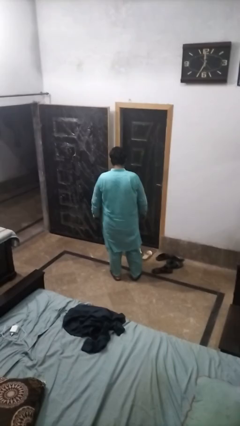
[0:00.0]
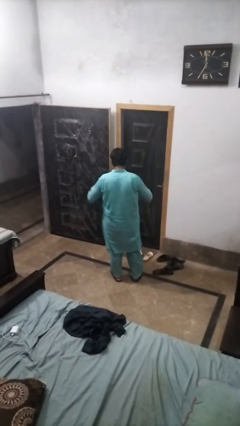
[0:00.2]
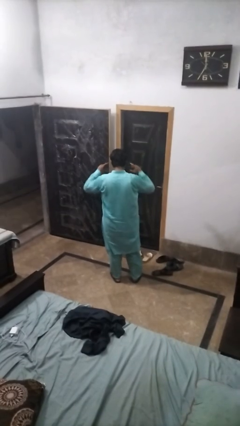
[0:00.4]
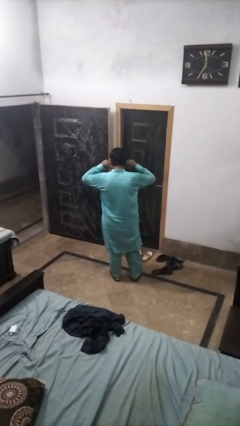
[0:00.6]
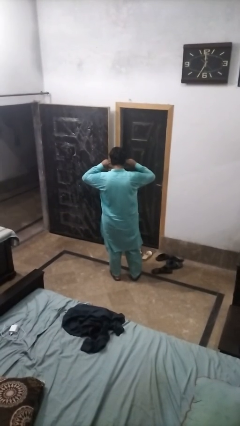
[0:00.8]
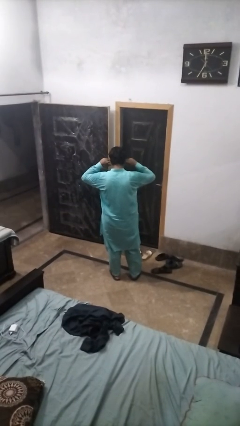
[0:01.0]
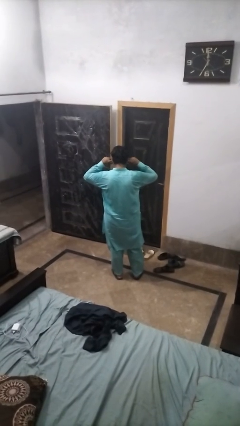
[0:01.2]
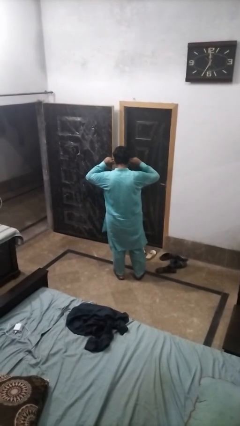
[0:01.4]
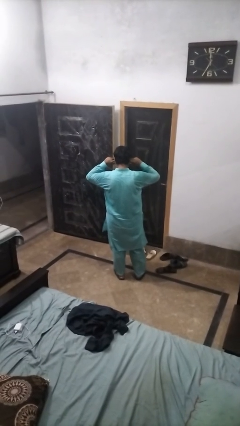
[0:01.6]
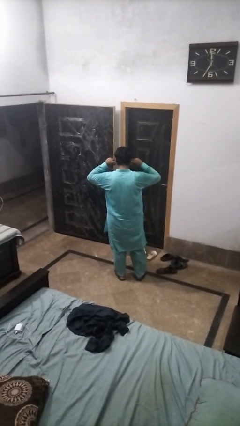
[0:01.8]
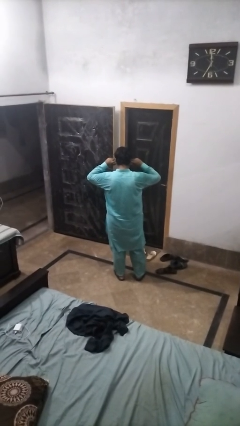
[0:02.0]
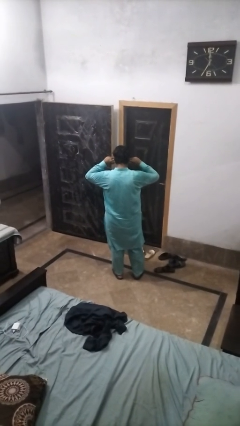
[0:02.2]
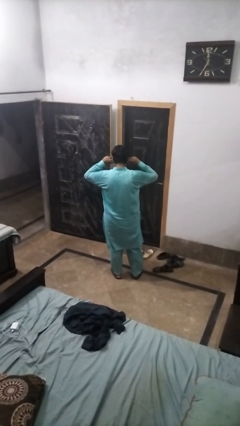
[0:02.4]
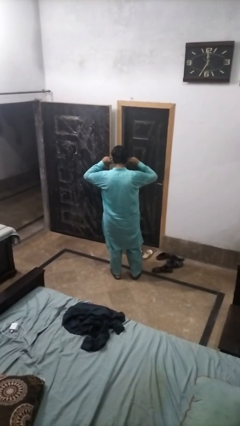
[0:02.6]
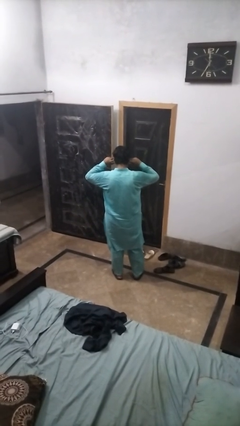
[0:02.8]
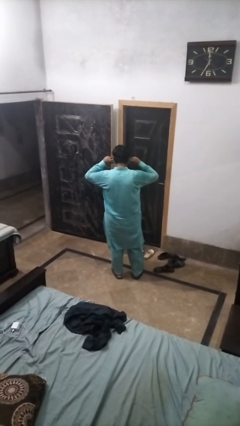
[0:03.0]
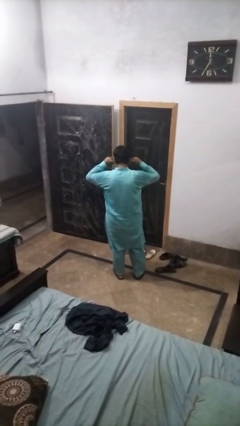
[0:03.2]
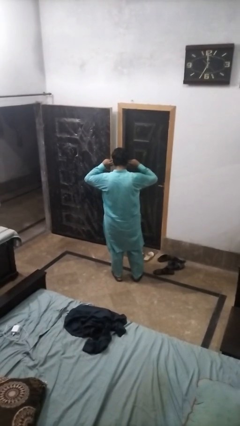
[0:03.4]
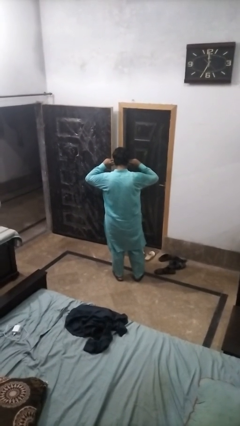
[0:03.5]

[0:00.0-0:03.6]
person puts fingers in ear

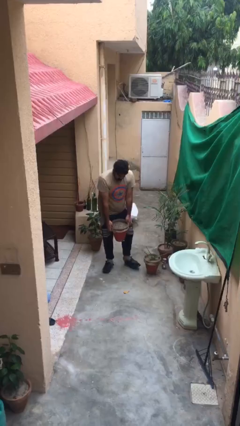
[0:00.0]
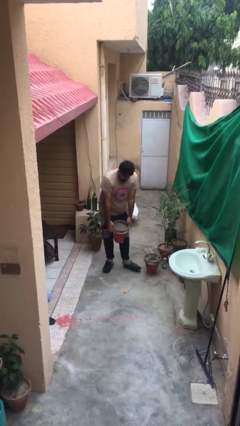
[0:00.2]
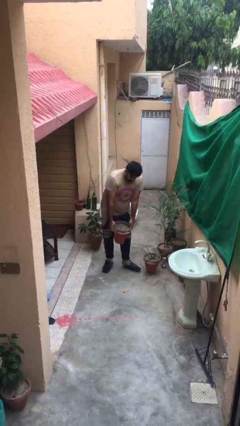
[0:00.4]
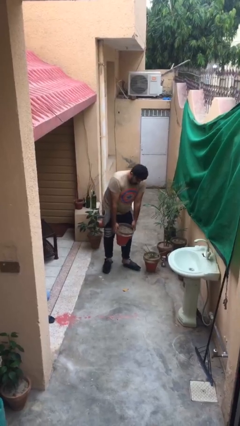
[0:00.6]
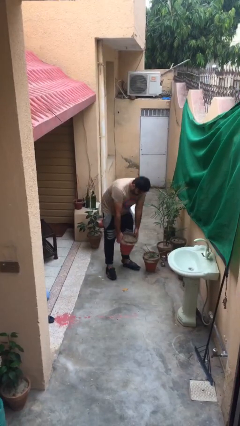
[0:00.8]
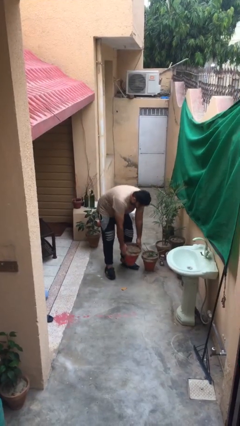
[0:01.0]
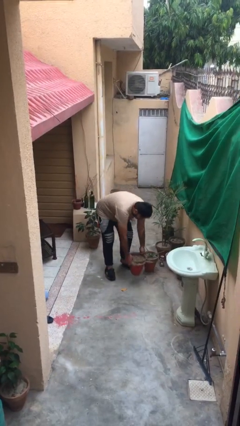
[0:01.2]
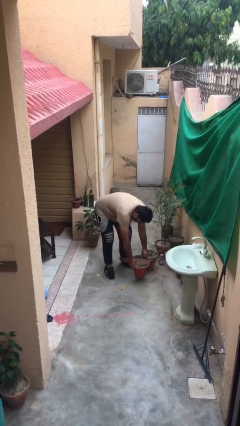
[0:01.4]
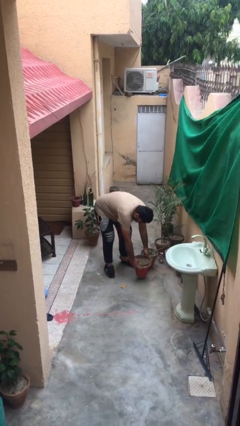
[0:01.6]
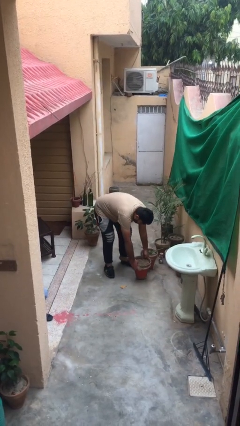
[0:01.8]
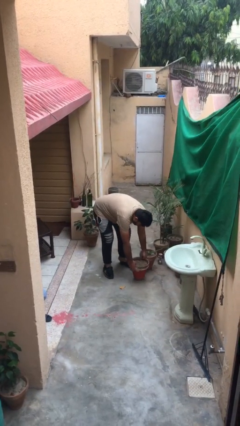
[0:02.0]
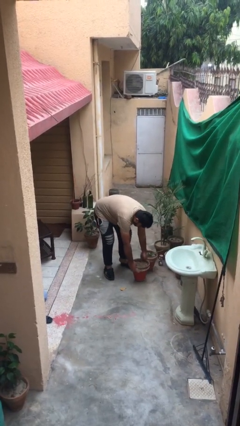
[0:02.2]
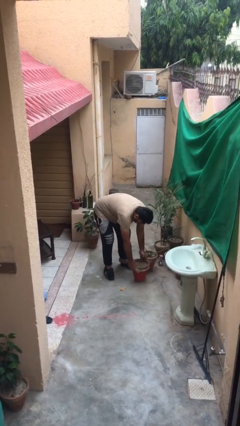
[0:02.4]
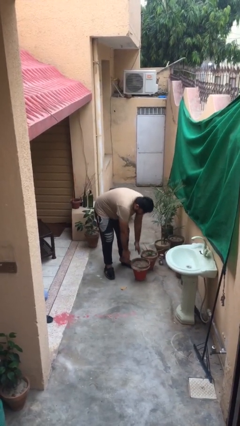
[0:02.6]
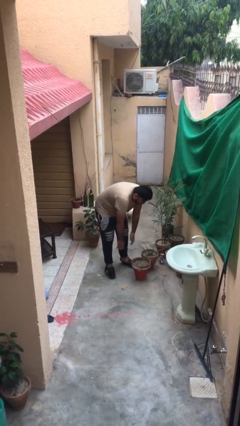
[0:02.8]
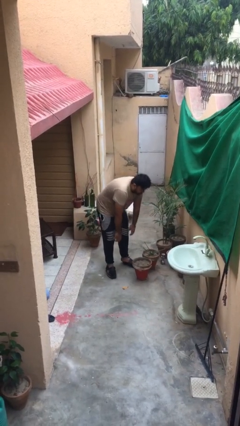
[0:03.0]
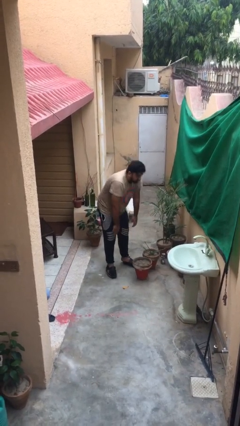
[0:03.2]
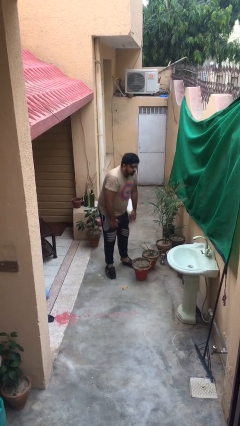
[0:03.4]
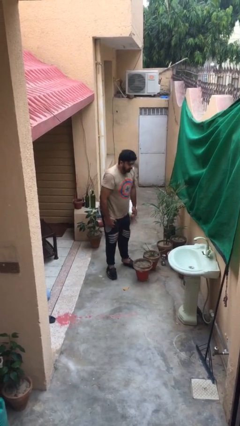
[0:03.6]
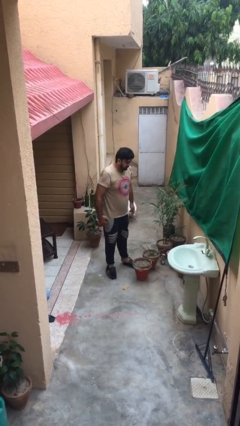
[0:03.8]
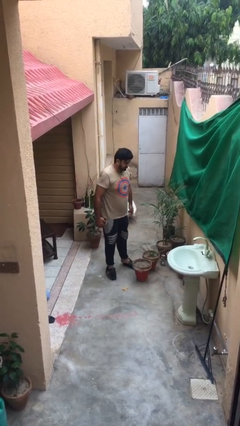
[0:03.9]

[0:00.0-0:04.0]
person puts down object on floor

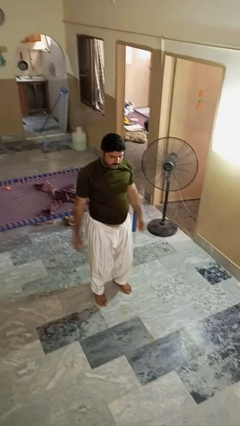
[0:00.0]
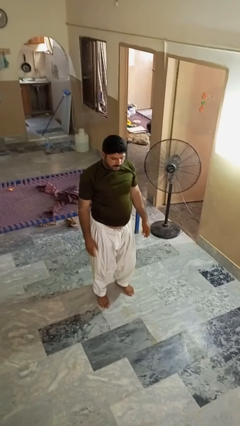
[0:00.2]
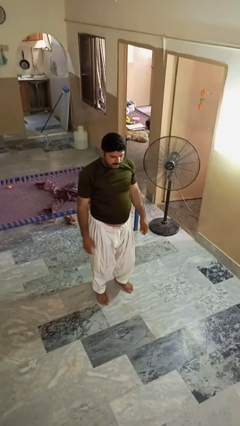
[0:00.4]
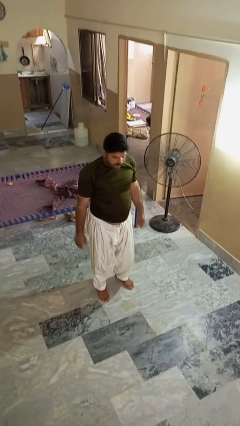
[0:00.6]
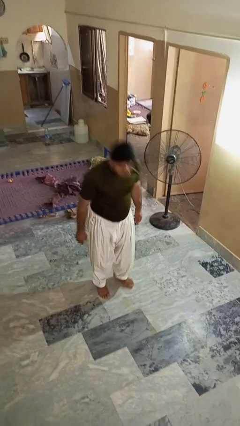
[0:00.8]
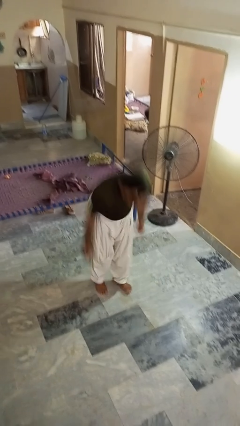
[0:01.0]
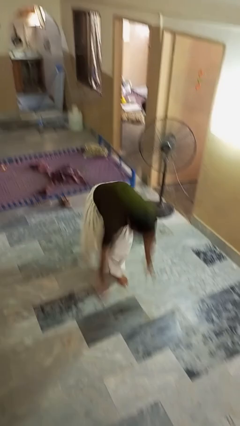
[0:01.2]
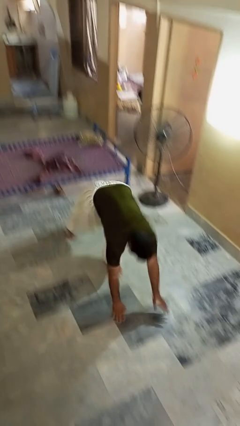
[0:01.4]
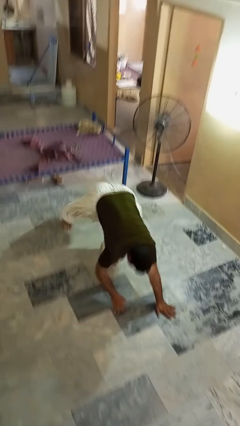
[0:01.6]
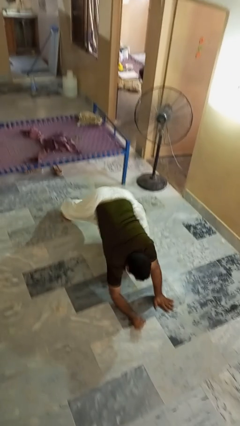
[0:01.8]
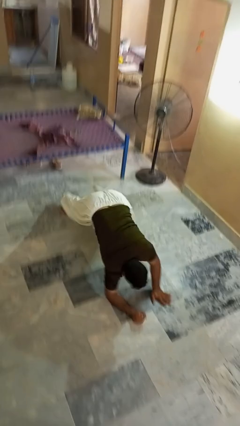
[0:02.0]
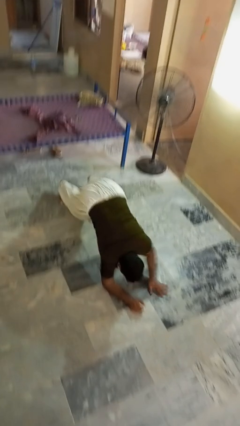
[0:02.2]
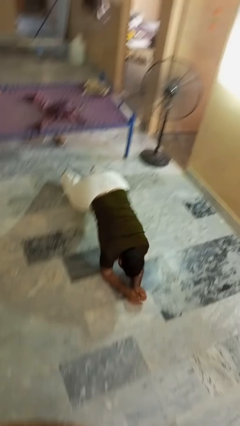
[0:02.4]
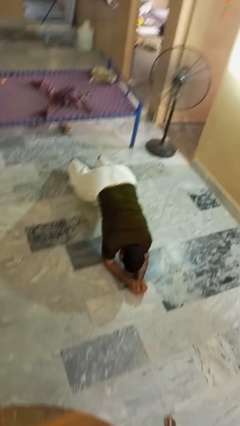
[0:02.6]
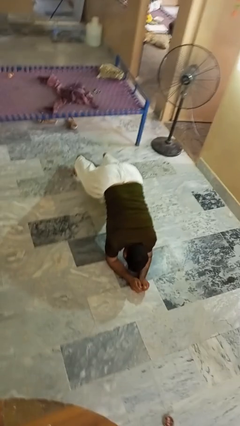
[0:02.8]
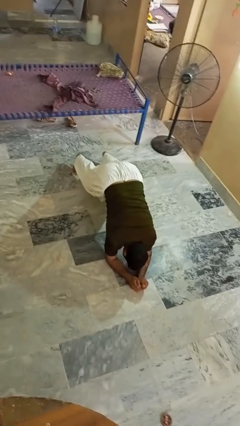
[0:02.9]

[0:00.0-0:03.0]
person exercises with plank

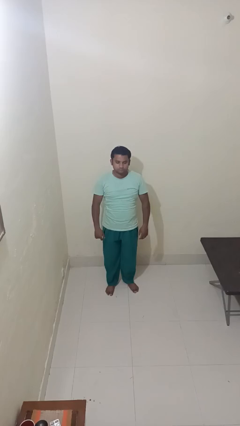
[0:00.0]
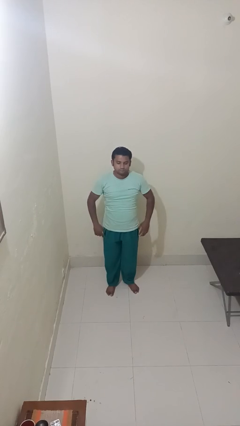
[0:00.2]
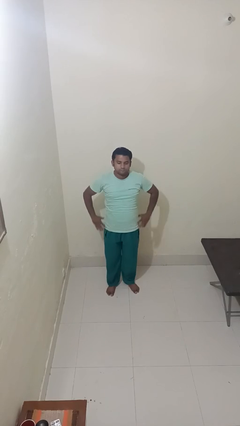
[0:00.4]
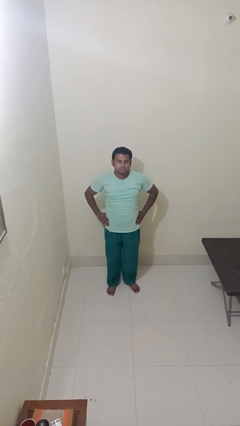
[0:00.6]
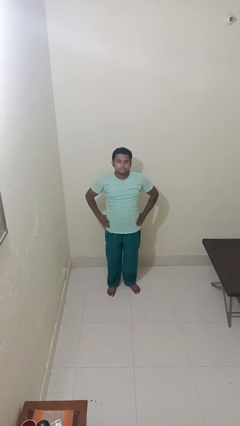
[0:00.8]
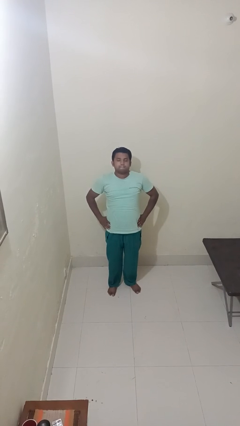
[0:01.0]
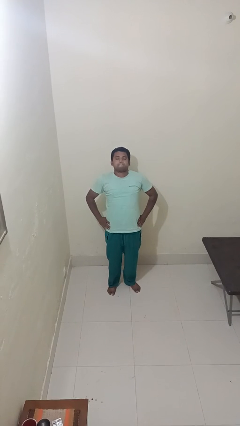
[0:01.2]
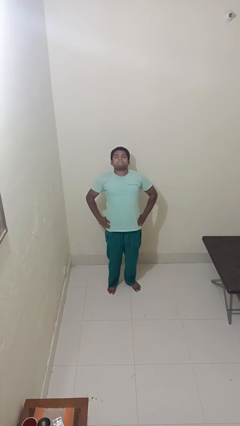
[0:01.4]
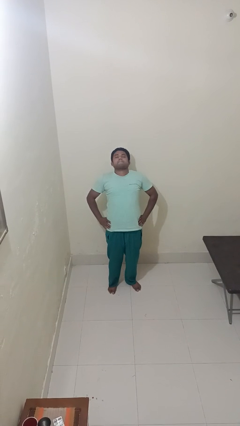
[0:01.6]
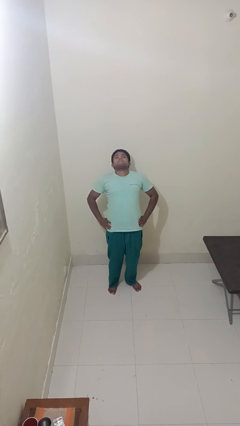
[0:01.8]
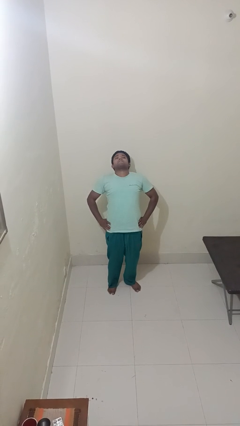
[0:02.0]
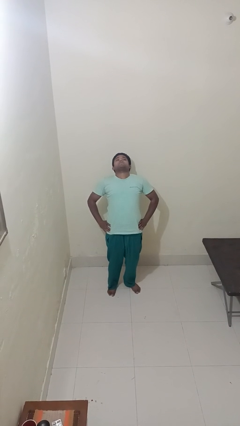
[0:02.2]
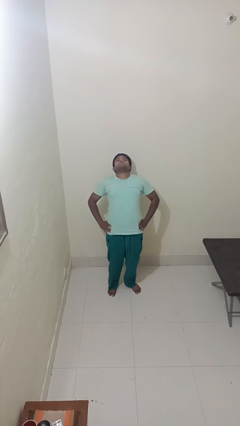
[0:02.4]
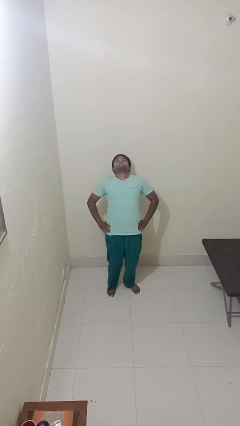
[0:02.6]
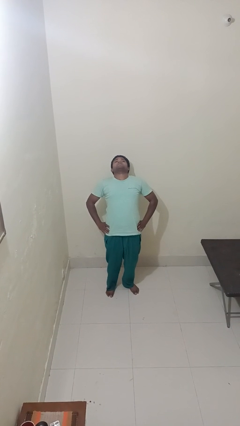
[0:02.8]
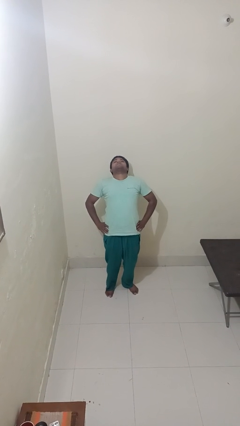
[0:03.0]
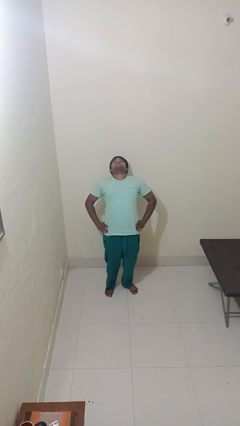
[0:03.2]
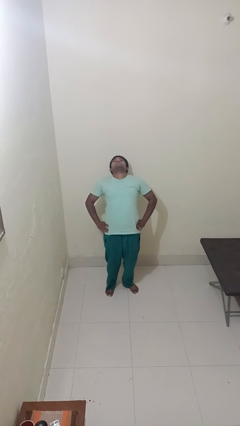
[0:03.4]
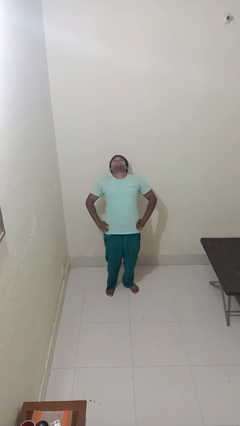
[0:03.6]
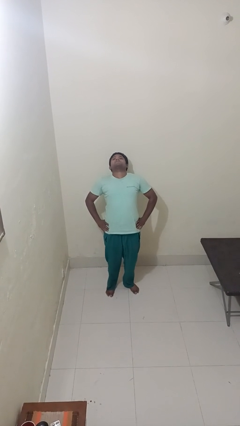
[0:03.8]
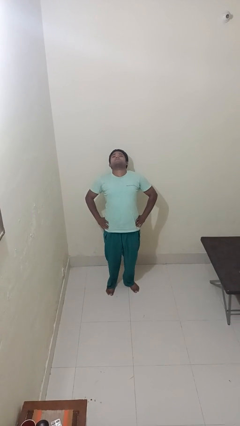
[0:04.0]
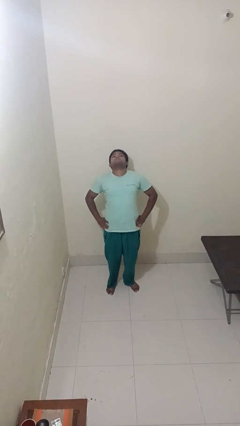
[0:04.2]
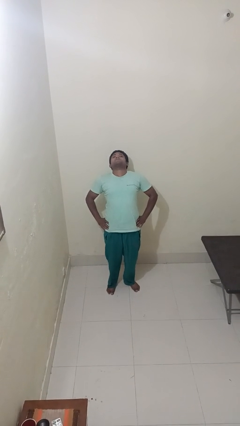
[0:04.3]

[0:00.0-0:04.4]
person stretches back

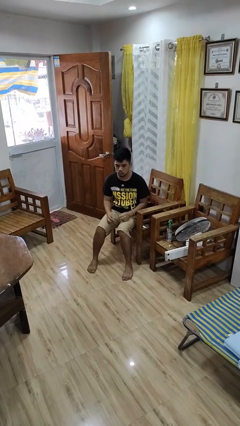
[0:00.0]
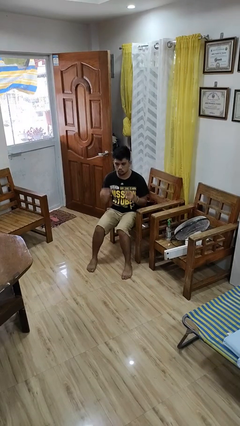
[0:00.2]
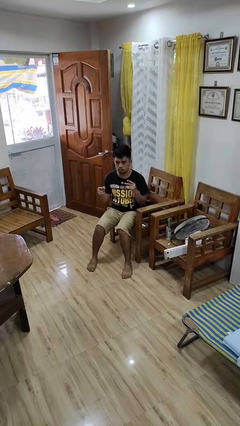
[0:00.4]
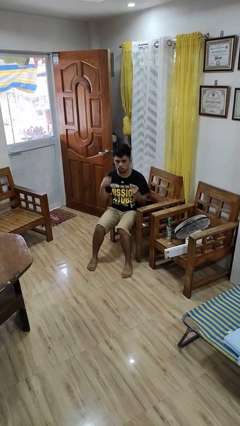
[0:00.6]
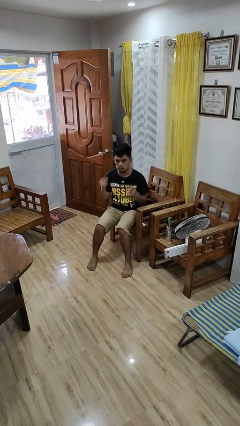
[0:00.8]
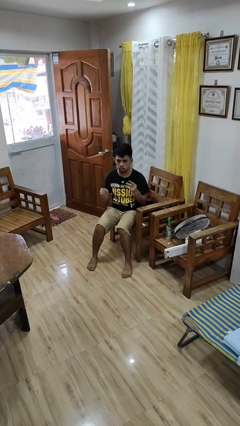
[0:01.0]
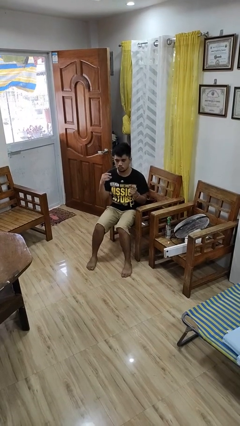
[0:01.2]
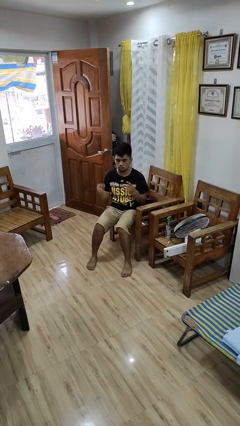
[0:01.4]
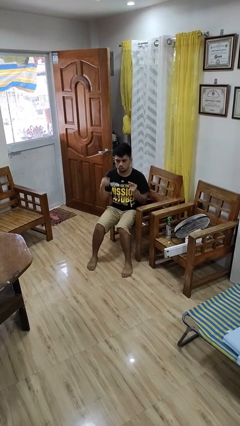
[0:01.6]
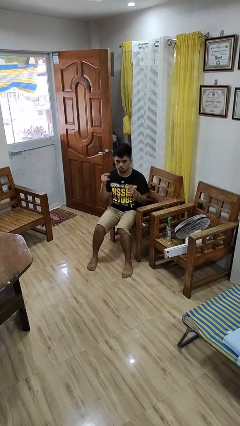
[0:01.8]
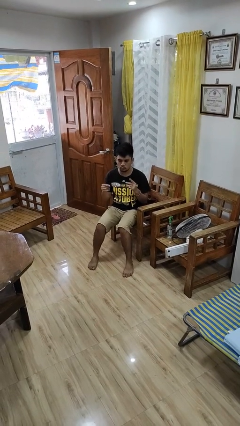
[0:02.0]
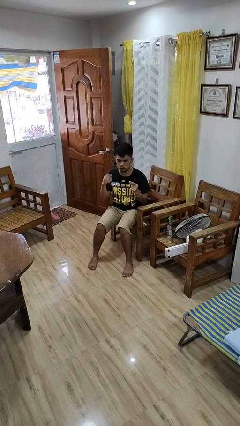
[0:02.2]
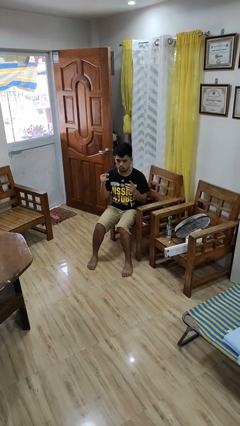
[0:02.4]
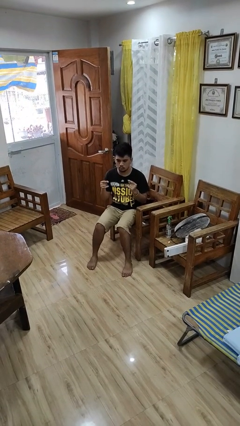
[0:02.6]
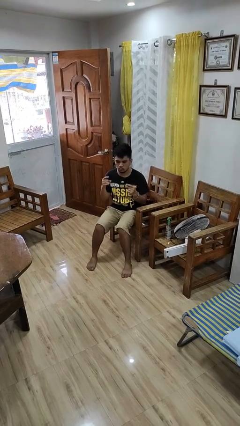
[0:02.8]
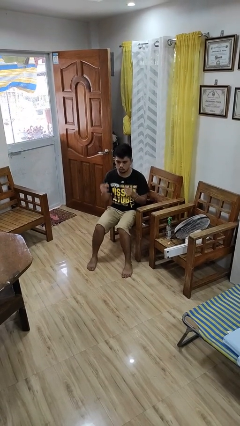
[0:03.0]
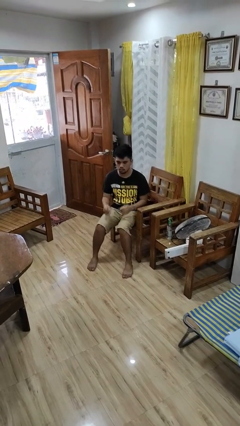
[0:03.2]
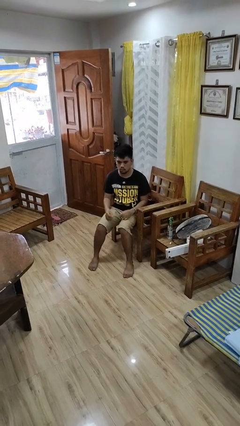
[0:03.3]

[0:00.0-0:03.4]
person snaps fingers
